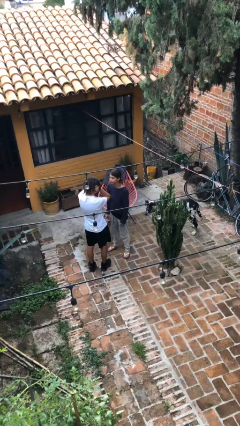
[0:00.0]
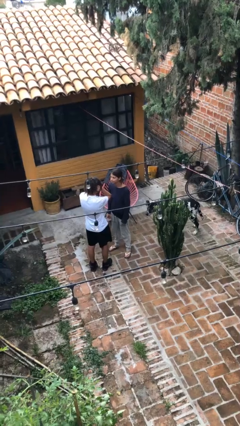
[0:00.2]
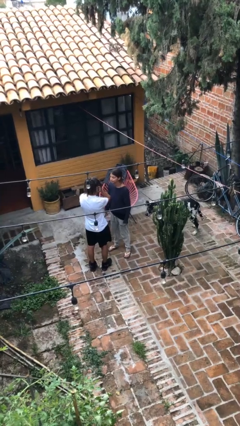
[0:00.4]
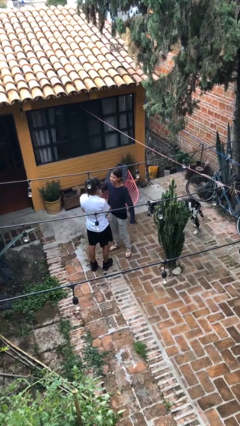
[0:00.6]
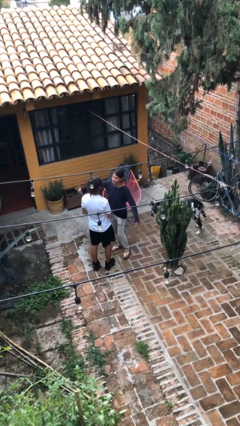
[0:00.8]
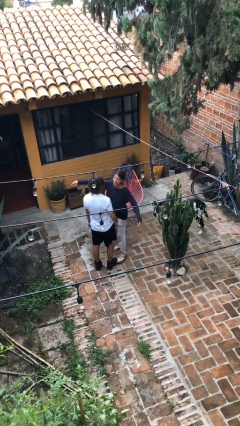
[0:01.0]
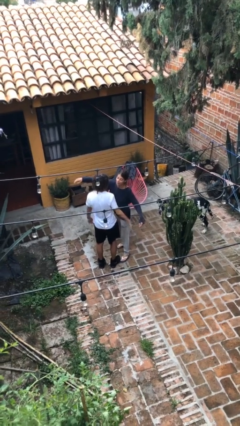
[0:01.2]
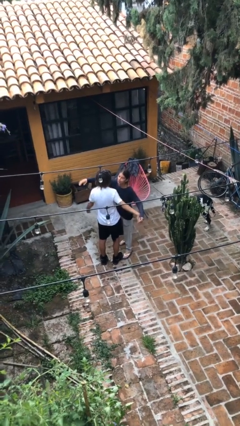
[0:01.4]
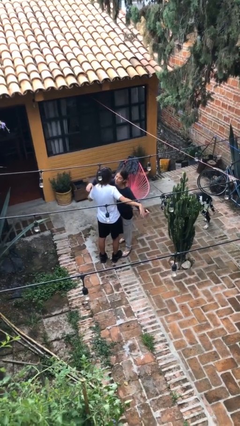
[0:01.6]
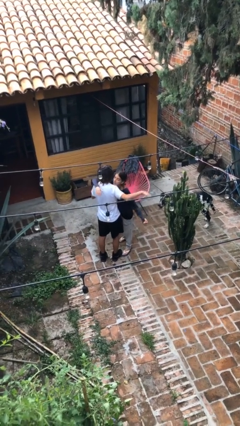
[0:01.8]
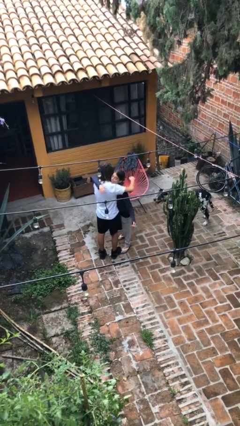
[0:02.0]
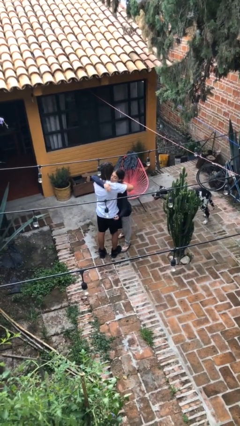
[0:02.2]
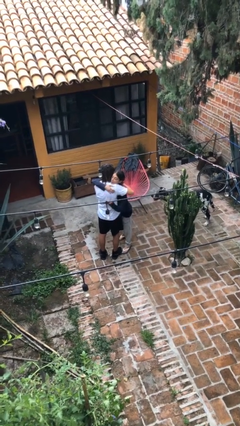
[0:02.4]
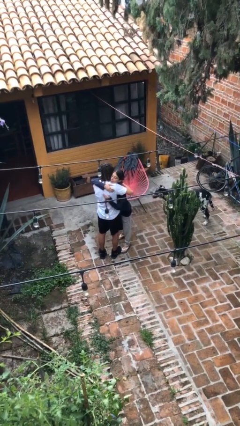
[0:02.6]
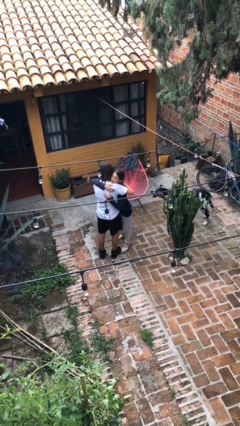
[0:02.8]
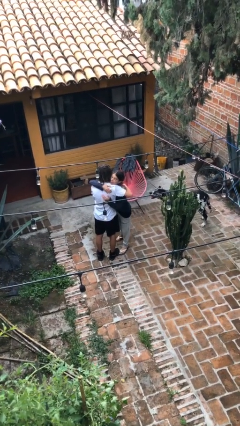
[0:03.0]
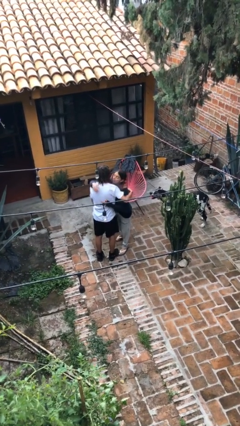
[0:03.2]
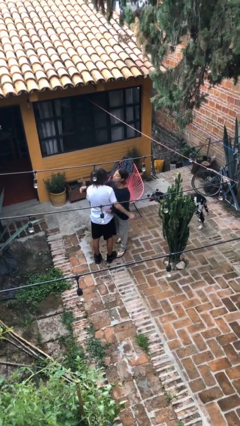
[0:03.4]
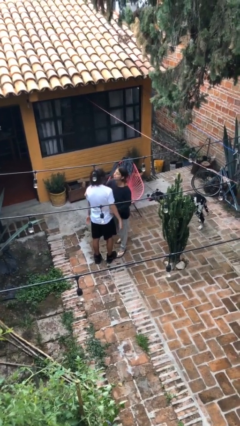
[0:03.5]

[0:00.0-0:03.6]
person embraces person

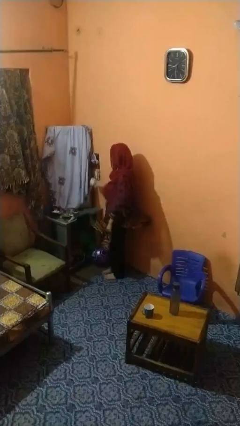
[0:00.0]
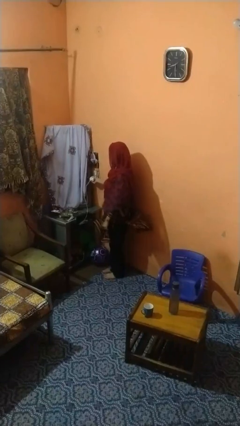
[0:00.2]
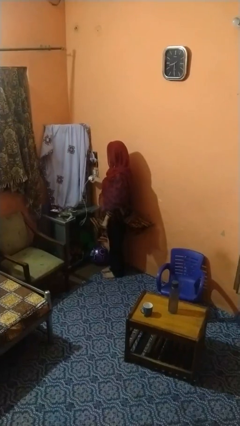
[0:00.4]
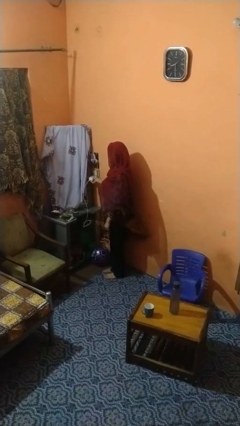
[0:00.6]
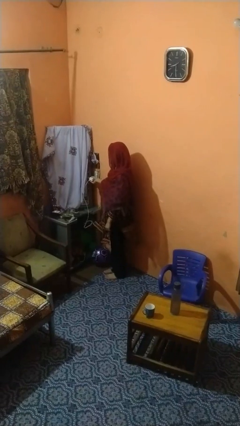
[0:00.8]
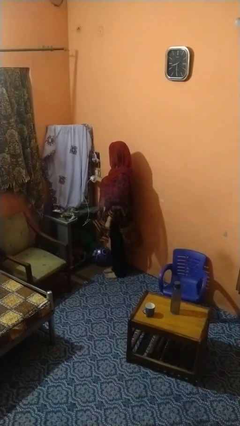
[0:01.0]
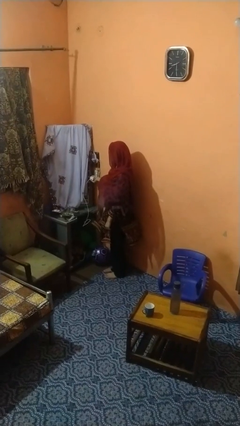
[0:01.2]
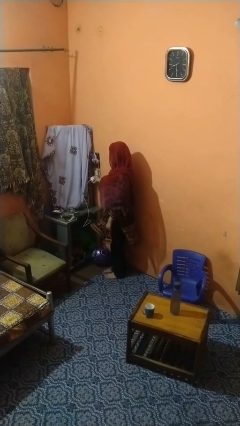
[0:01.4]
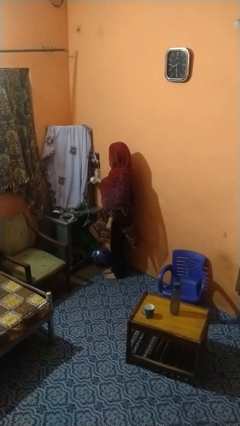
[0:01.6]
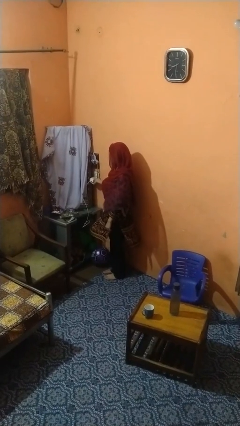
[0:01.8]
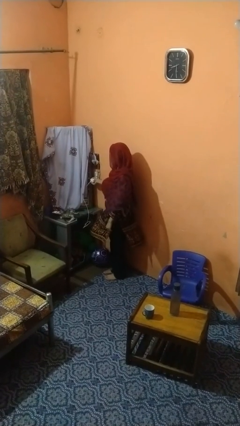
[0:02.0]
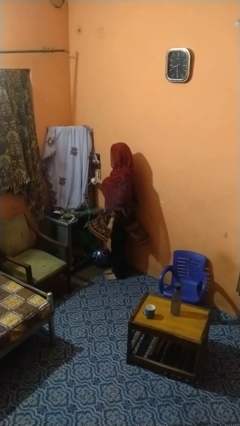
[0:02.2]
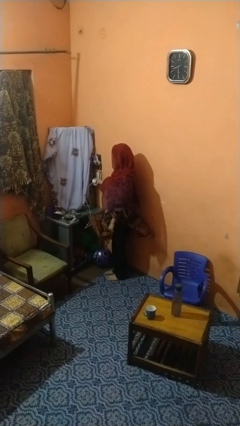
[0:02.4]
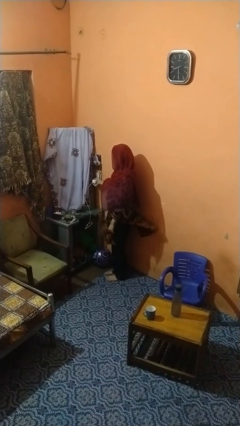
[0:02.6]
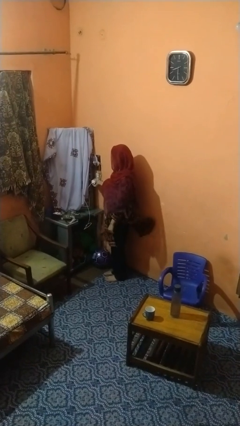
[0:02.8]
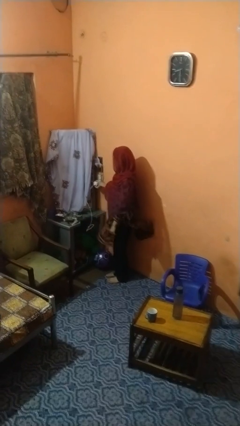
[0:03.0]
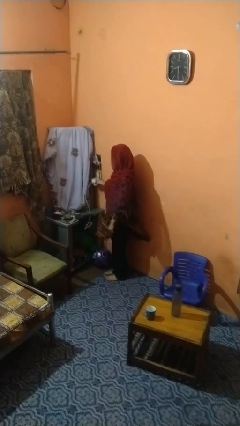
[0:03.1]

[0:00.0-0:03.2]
person plugs into electrical socket

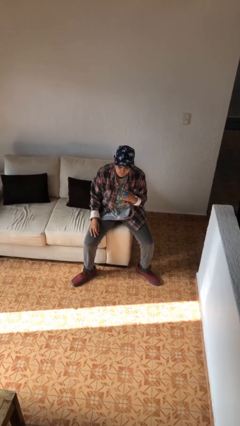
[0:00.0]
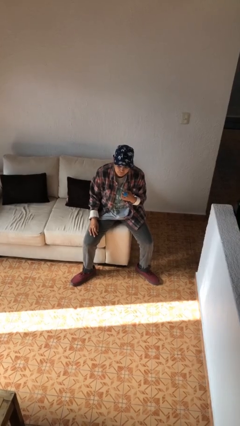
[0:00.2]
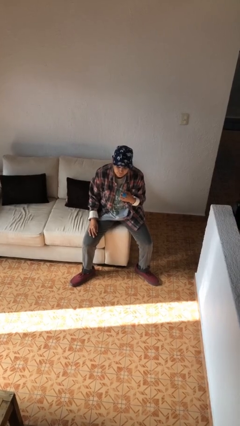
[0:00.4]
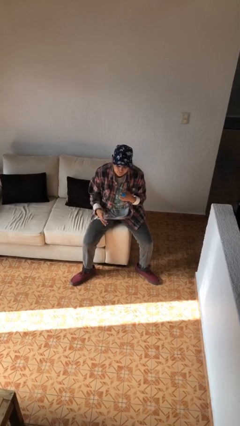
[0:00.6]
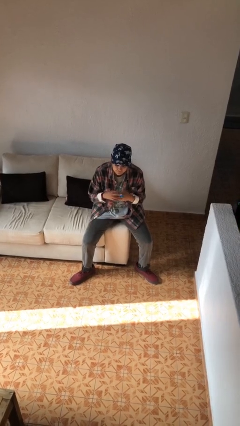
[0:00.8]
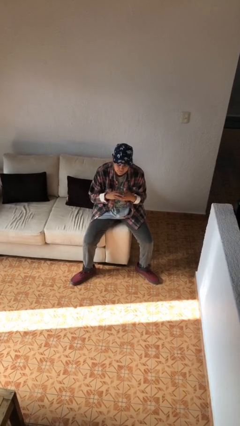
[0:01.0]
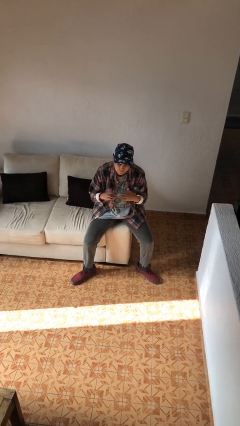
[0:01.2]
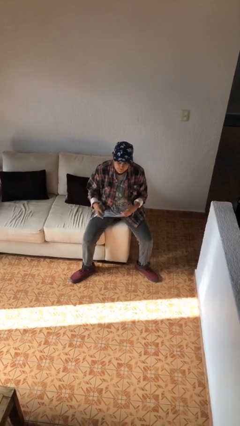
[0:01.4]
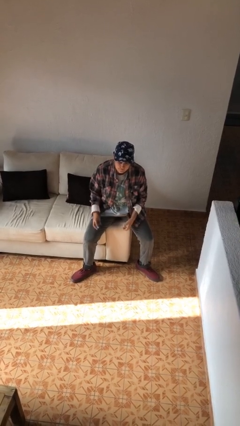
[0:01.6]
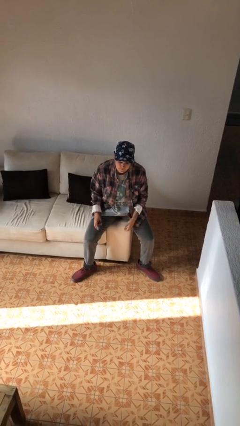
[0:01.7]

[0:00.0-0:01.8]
person takes off ring

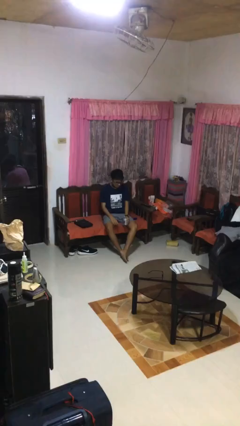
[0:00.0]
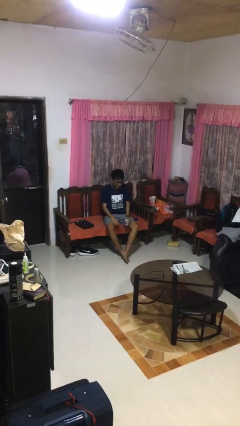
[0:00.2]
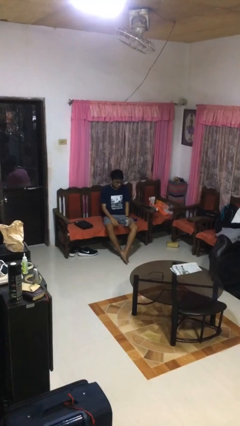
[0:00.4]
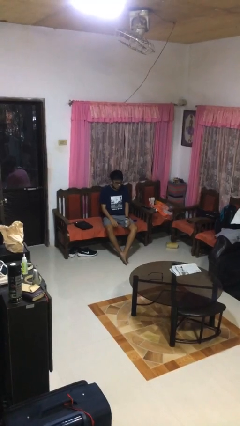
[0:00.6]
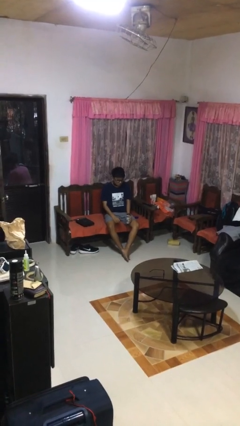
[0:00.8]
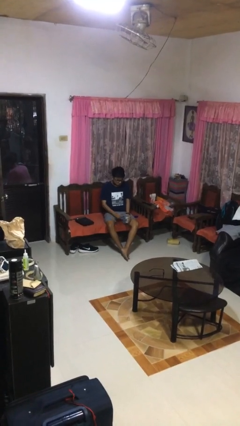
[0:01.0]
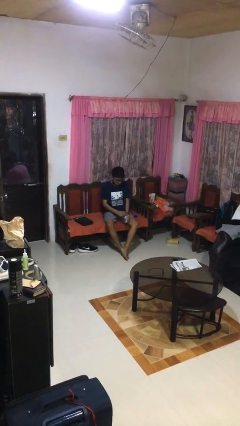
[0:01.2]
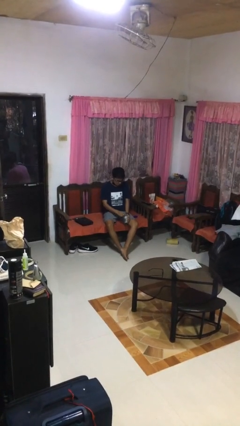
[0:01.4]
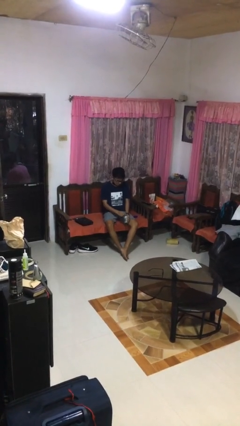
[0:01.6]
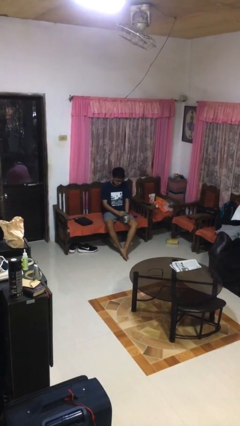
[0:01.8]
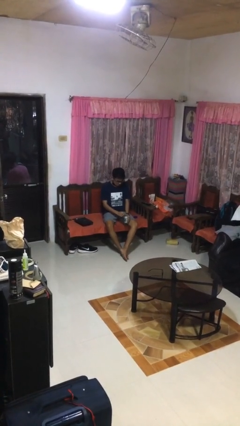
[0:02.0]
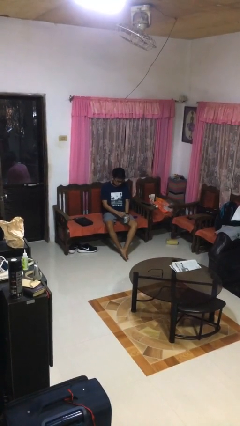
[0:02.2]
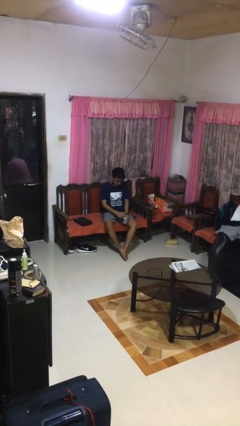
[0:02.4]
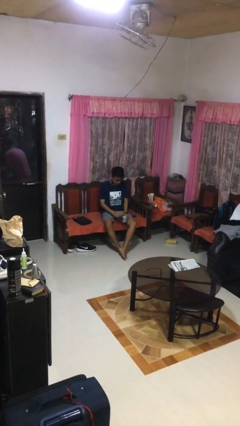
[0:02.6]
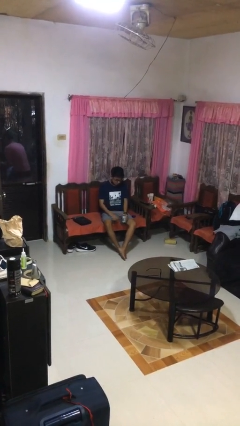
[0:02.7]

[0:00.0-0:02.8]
person opens beverage can

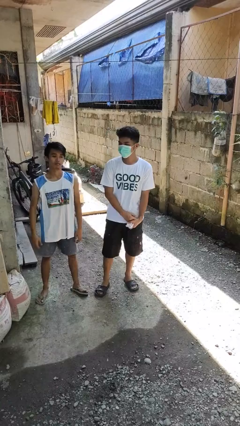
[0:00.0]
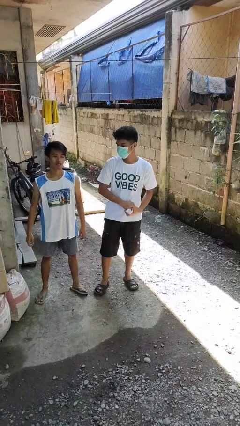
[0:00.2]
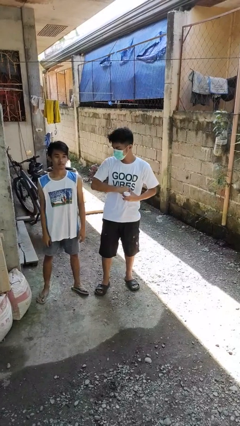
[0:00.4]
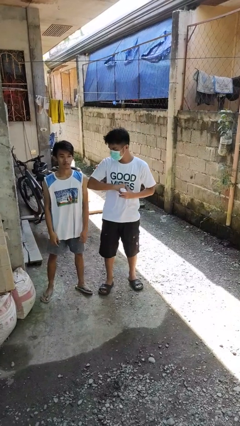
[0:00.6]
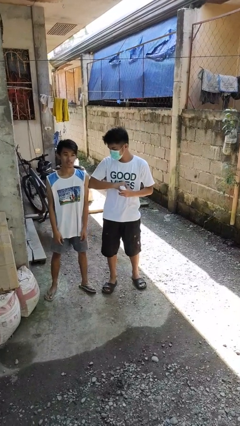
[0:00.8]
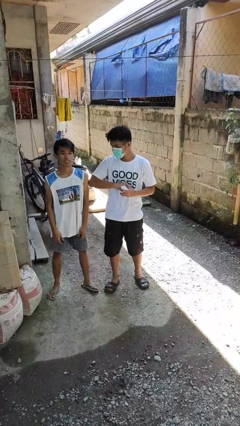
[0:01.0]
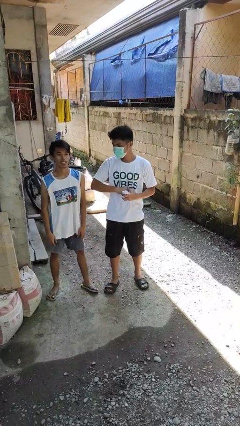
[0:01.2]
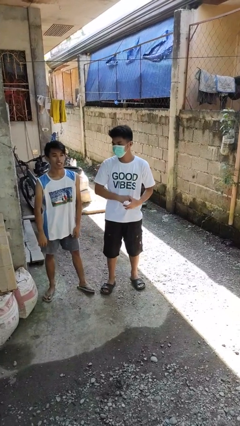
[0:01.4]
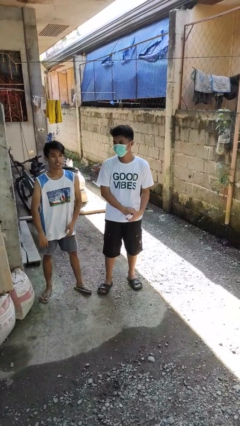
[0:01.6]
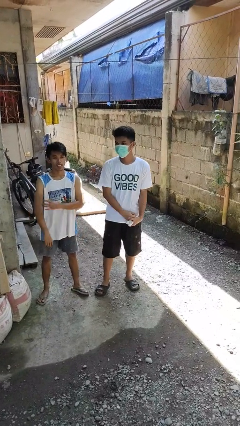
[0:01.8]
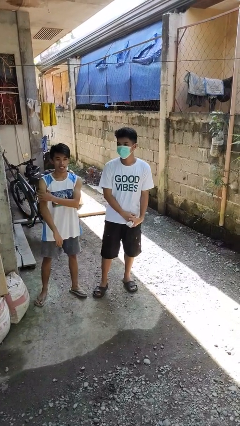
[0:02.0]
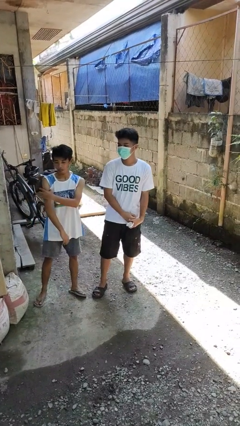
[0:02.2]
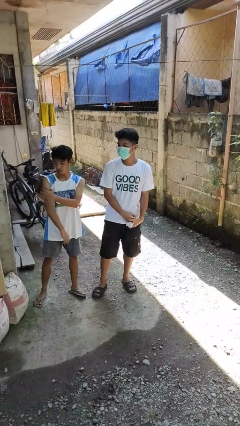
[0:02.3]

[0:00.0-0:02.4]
person nudges person with elbow
